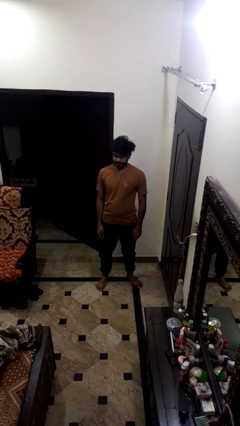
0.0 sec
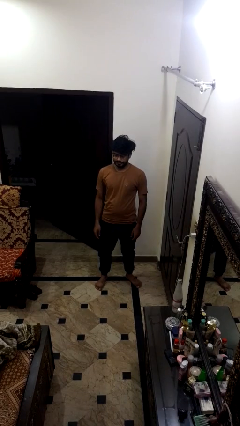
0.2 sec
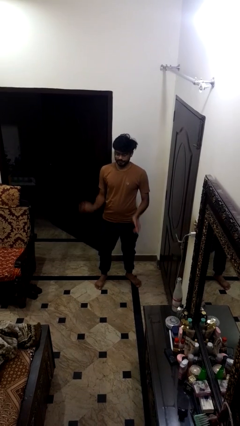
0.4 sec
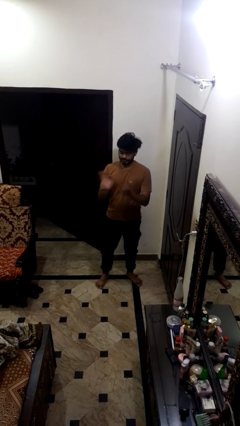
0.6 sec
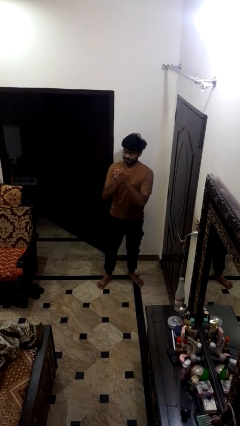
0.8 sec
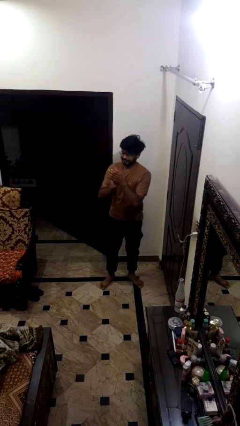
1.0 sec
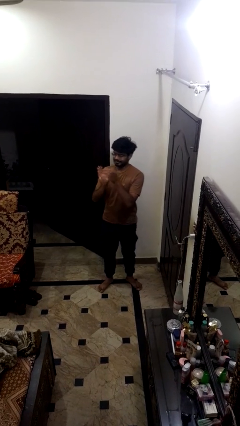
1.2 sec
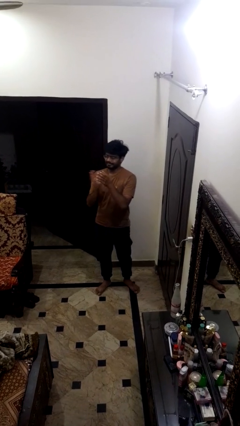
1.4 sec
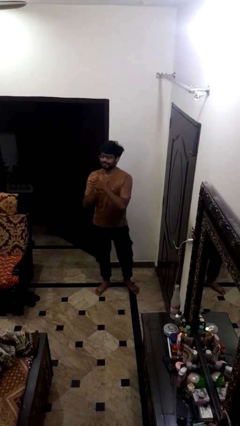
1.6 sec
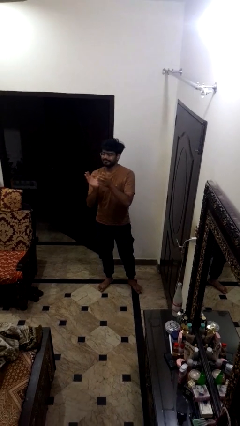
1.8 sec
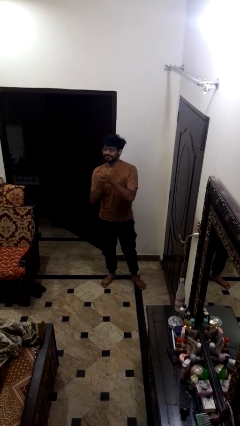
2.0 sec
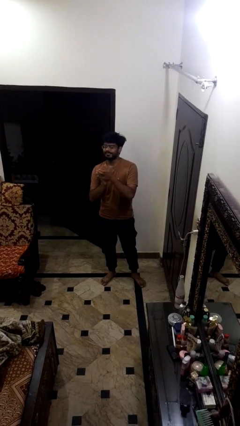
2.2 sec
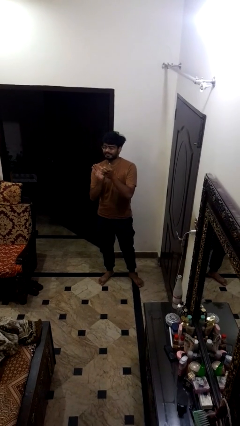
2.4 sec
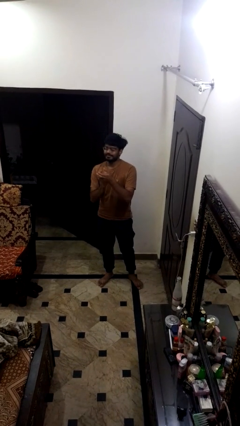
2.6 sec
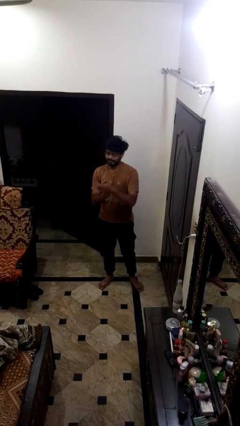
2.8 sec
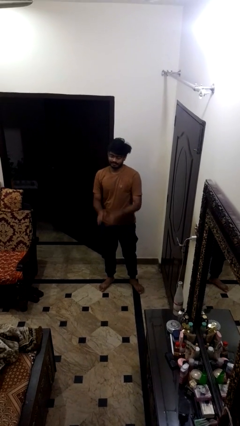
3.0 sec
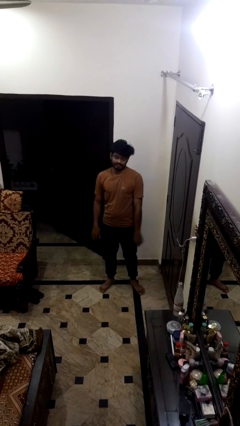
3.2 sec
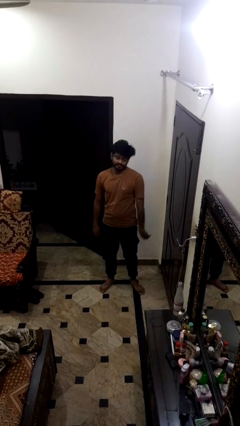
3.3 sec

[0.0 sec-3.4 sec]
person claps hands

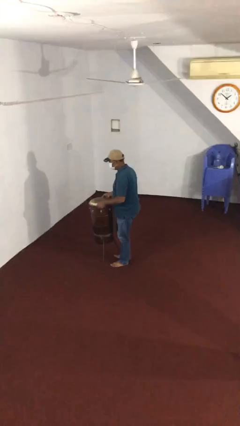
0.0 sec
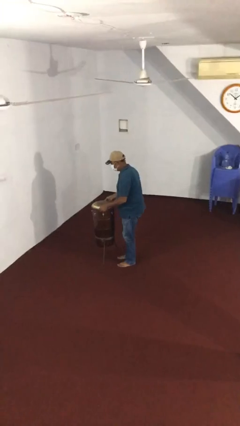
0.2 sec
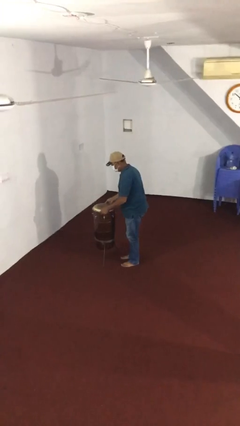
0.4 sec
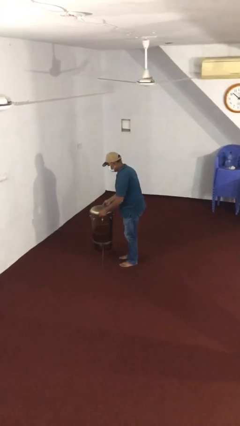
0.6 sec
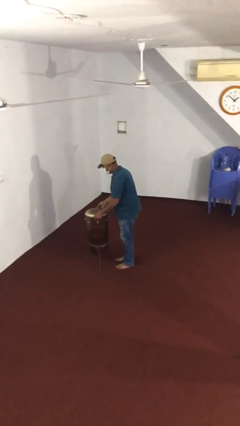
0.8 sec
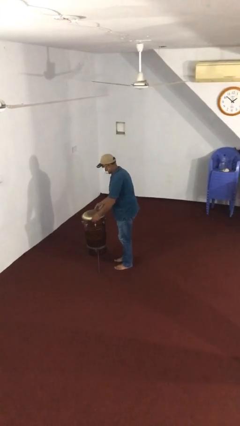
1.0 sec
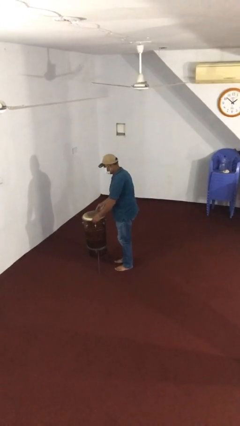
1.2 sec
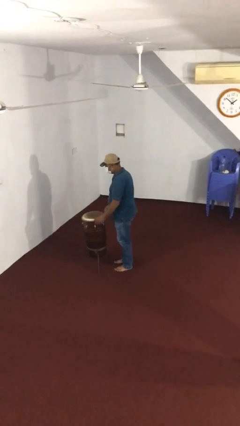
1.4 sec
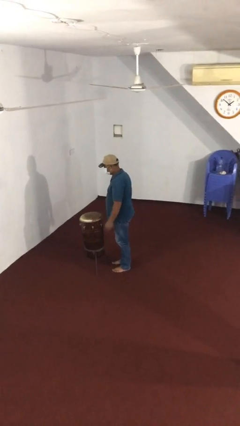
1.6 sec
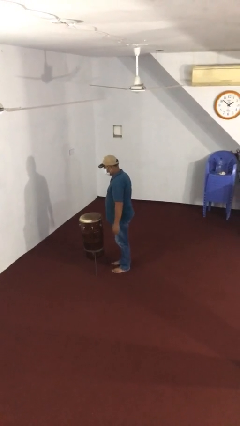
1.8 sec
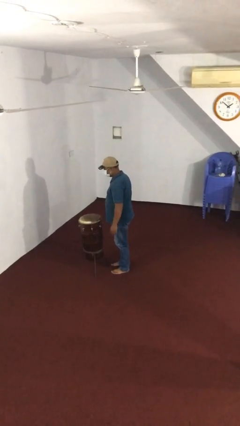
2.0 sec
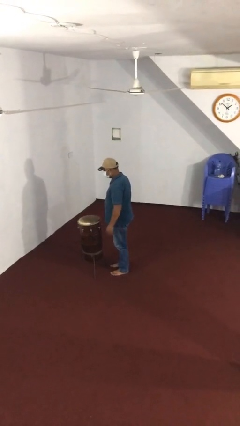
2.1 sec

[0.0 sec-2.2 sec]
person puts down object on floor

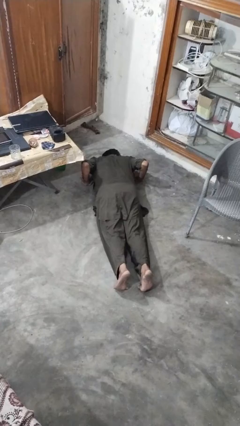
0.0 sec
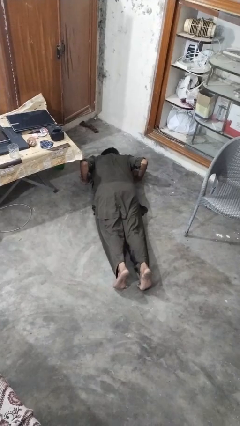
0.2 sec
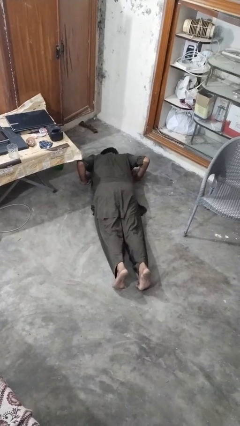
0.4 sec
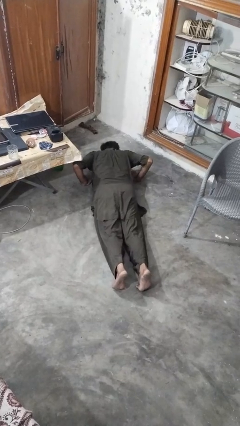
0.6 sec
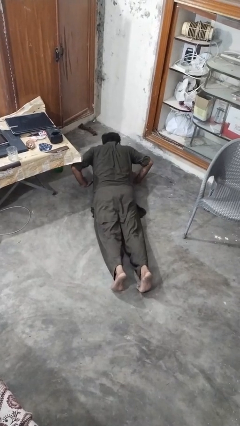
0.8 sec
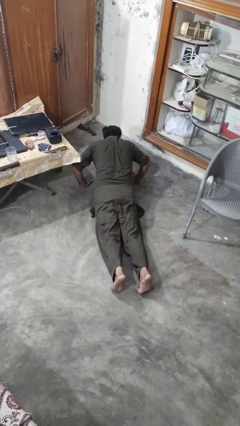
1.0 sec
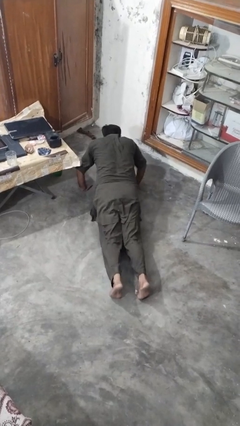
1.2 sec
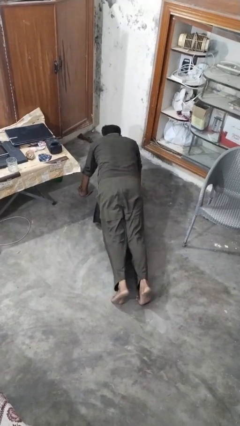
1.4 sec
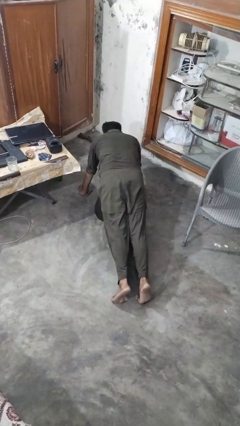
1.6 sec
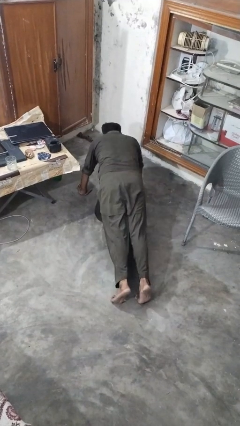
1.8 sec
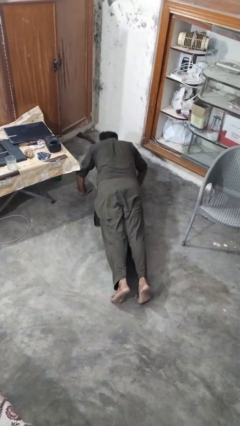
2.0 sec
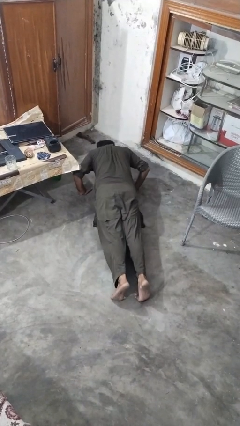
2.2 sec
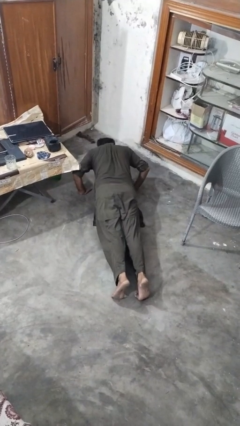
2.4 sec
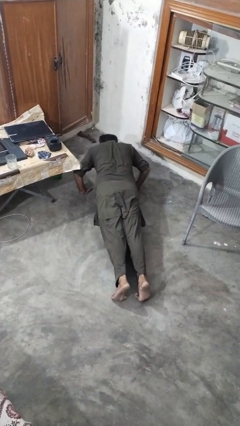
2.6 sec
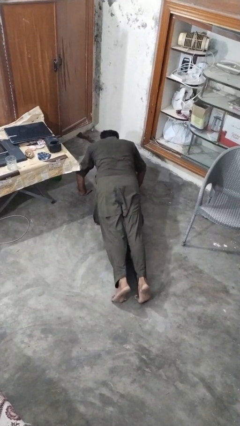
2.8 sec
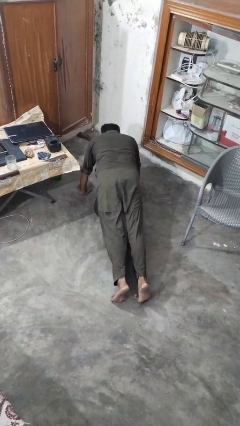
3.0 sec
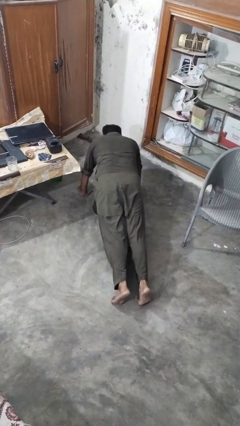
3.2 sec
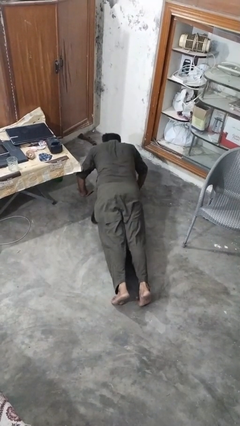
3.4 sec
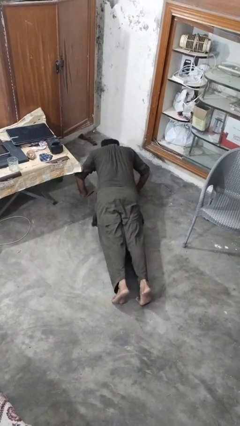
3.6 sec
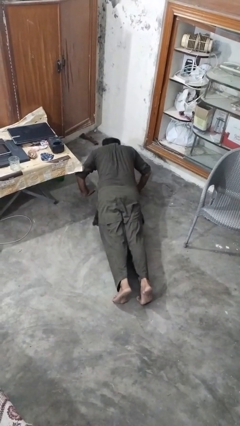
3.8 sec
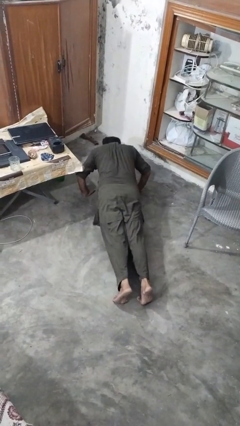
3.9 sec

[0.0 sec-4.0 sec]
person exercises with pushup

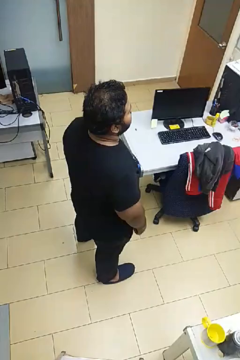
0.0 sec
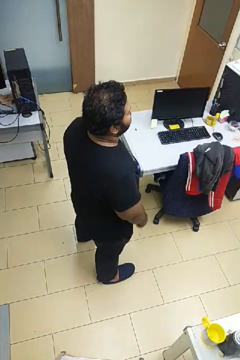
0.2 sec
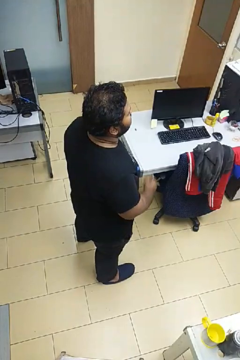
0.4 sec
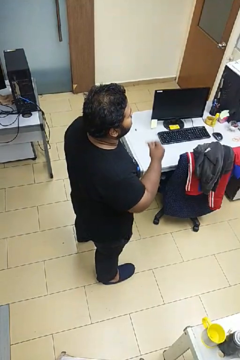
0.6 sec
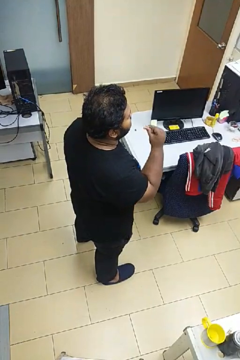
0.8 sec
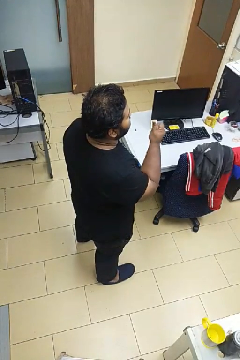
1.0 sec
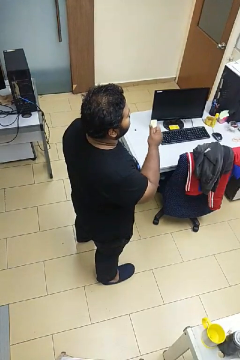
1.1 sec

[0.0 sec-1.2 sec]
person snaps fingers

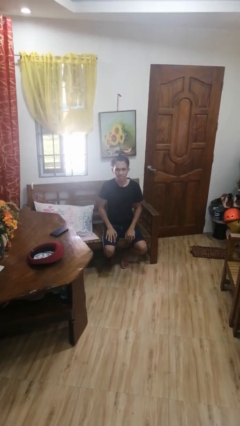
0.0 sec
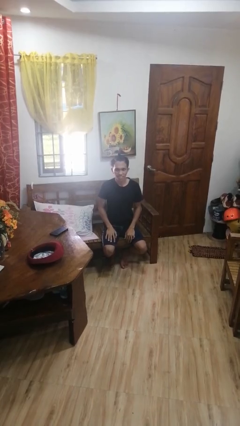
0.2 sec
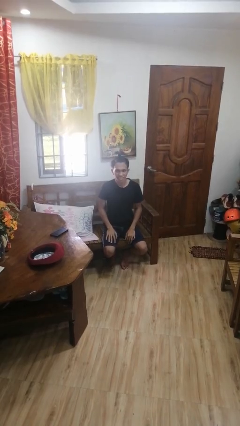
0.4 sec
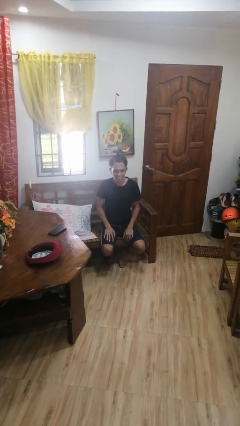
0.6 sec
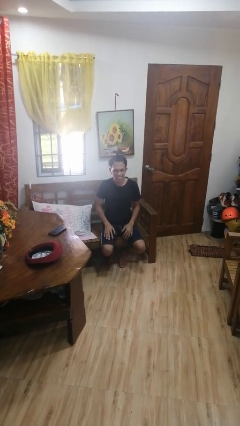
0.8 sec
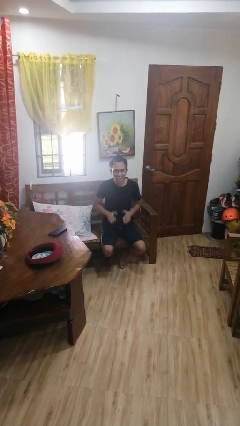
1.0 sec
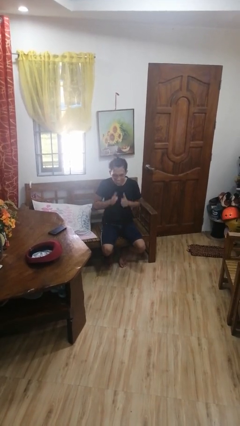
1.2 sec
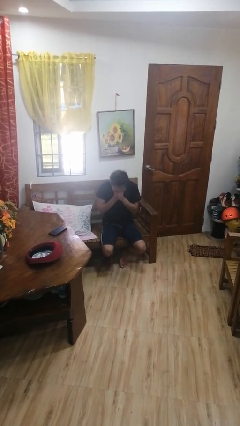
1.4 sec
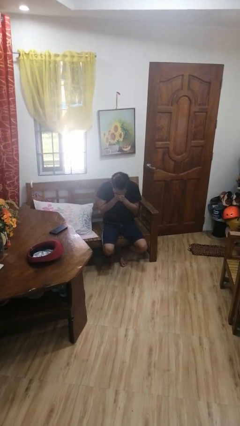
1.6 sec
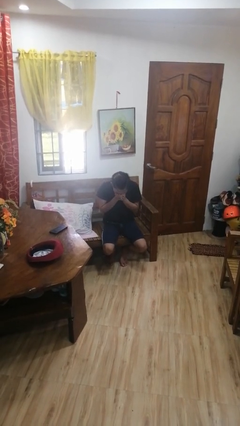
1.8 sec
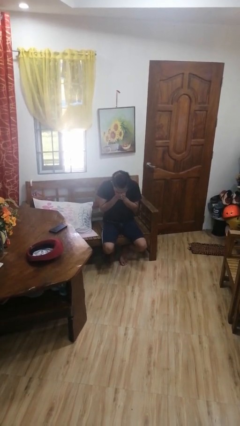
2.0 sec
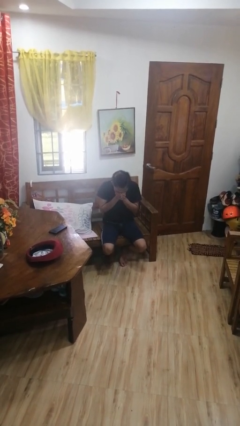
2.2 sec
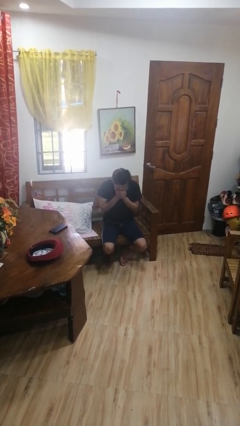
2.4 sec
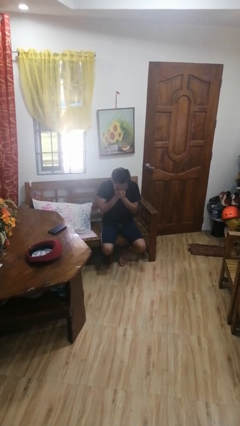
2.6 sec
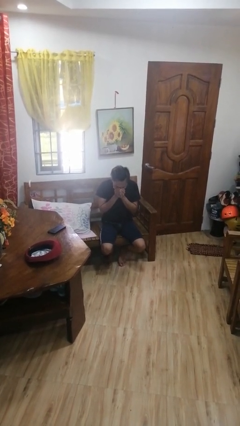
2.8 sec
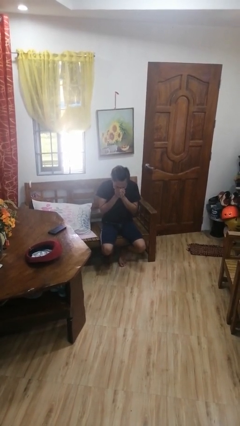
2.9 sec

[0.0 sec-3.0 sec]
person sneezes into hand

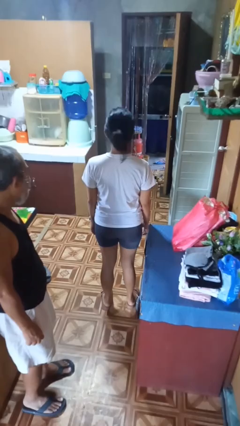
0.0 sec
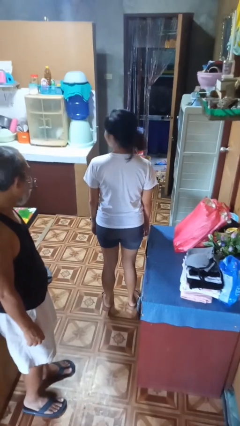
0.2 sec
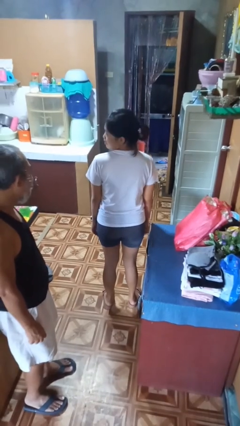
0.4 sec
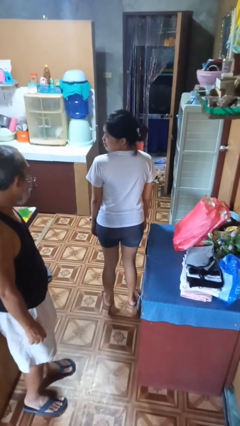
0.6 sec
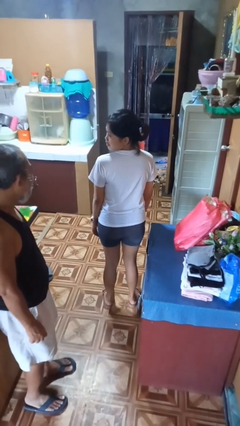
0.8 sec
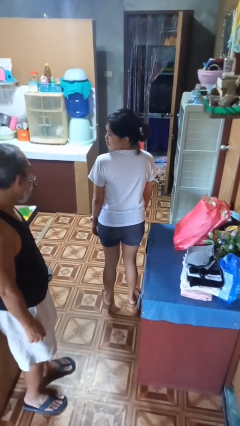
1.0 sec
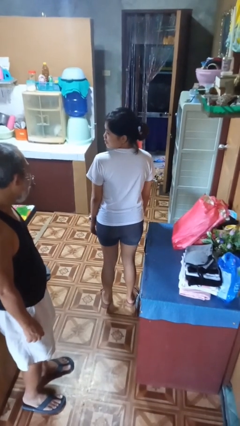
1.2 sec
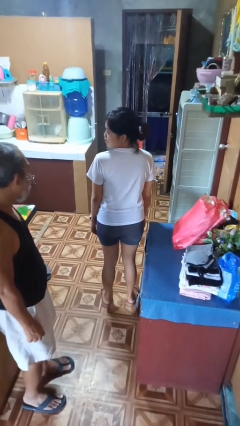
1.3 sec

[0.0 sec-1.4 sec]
person looks over shoulder

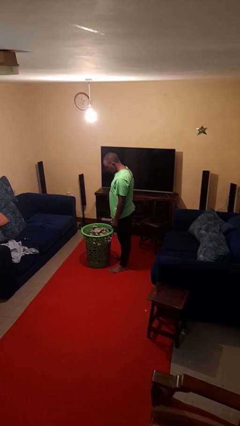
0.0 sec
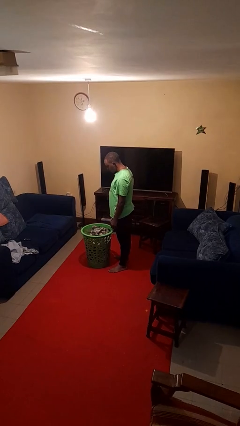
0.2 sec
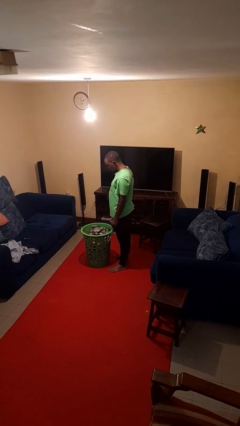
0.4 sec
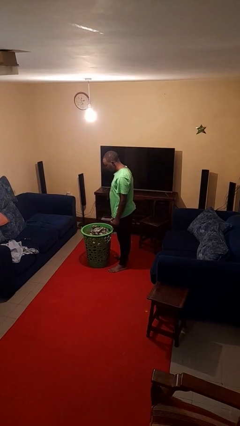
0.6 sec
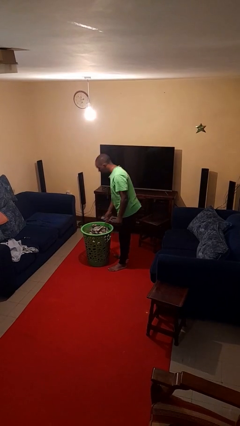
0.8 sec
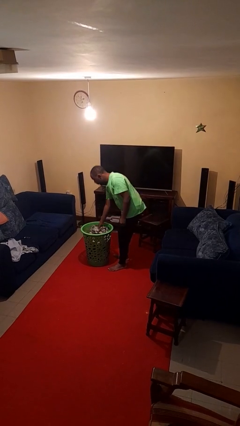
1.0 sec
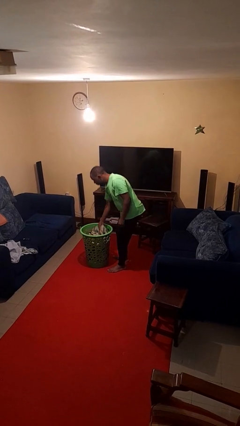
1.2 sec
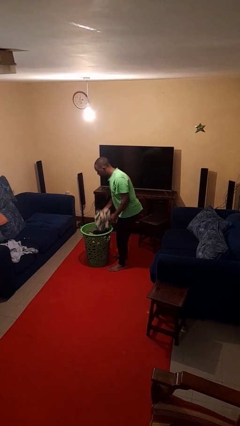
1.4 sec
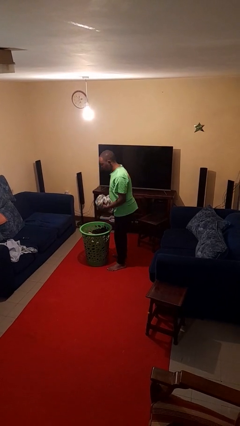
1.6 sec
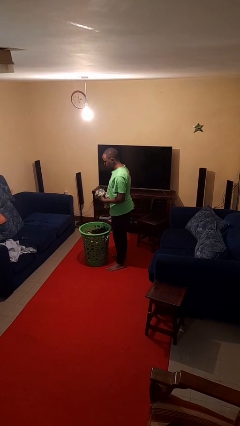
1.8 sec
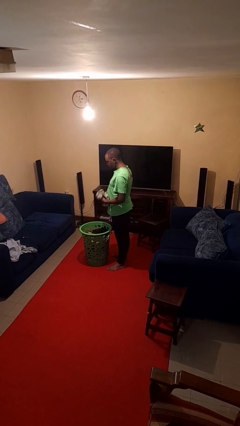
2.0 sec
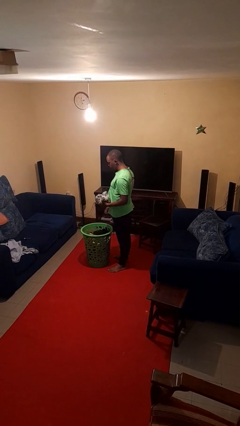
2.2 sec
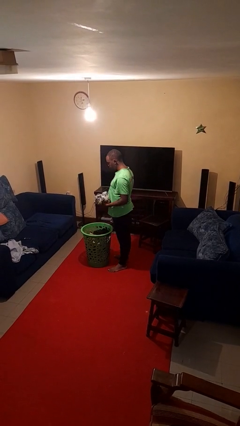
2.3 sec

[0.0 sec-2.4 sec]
person takes object from basket
